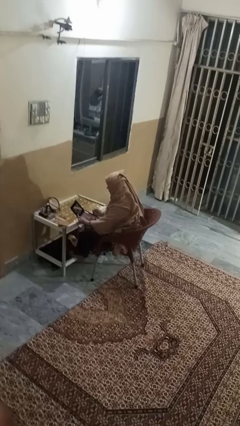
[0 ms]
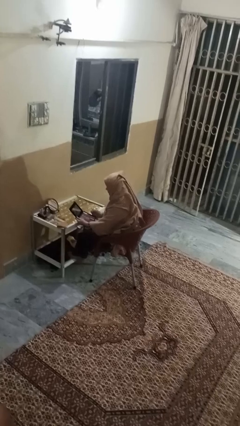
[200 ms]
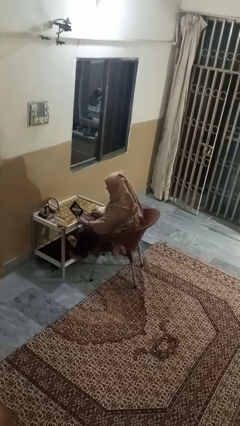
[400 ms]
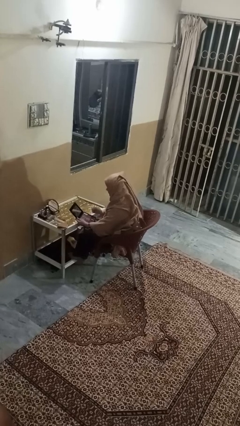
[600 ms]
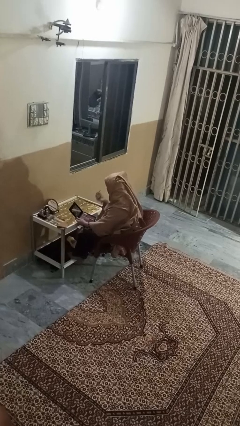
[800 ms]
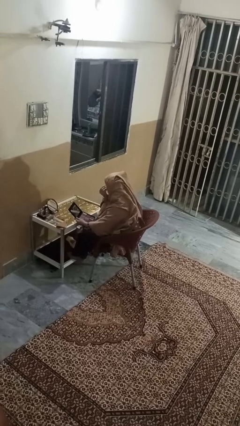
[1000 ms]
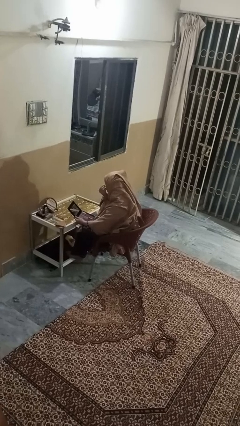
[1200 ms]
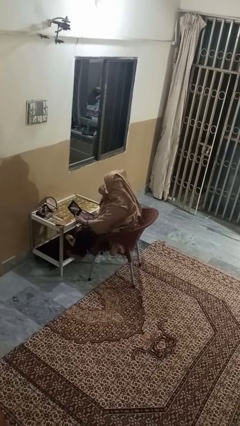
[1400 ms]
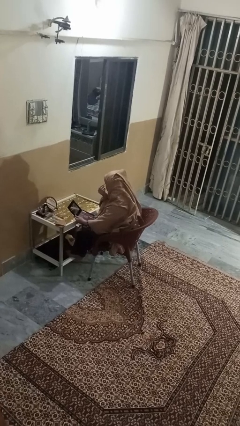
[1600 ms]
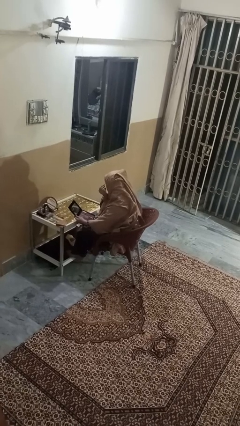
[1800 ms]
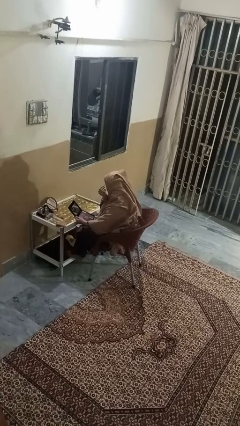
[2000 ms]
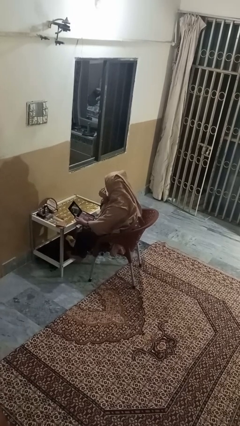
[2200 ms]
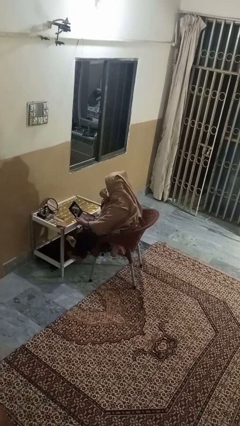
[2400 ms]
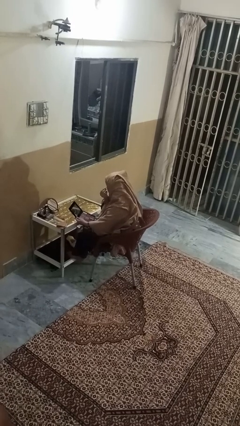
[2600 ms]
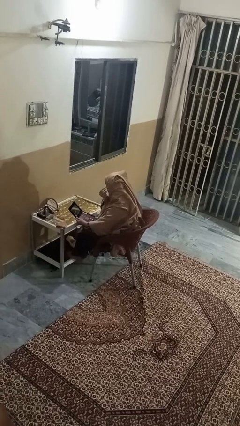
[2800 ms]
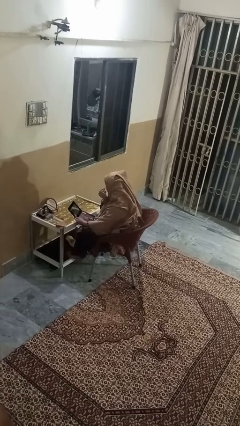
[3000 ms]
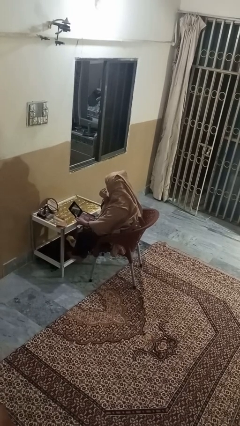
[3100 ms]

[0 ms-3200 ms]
person applies eye makeup

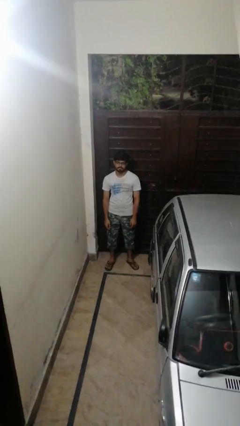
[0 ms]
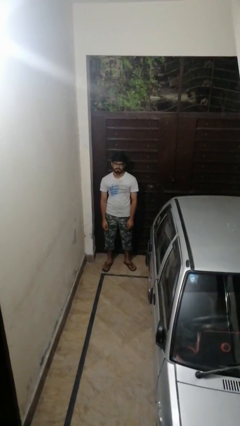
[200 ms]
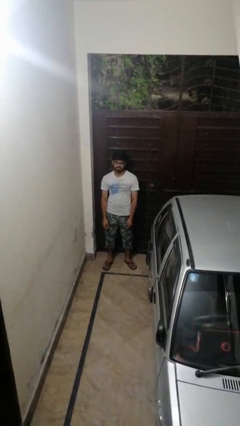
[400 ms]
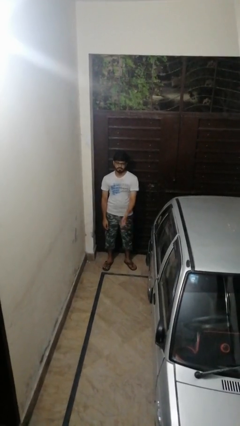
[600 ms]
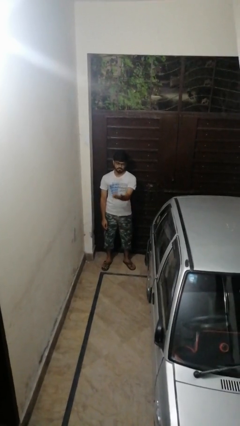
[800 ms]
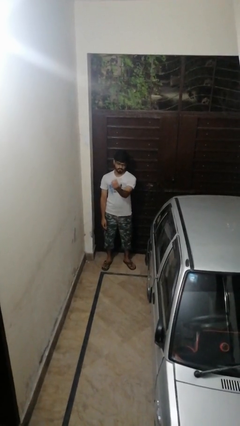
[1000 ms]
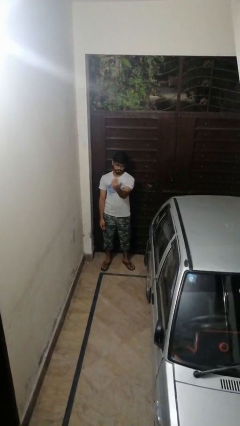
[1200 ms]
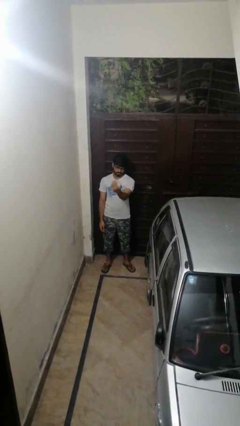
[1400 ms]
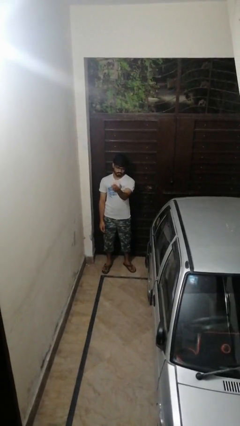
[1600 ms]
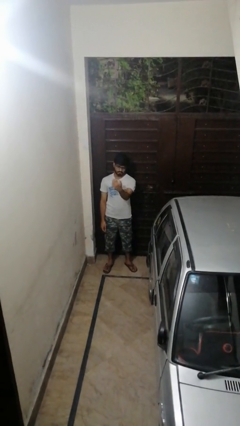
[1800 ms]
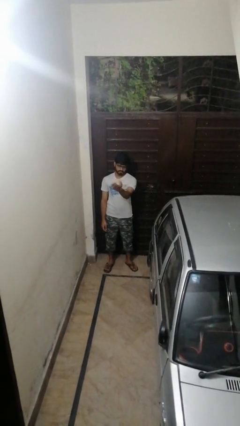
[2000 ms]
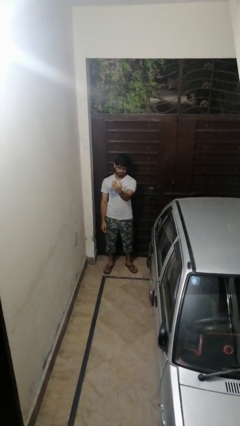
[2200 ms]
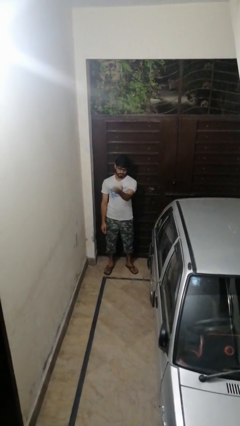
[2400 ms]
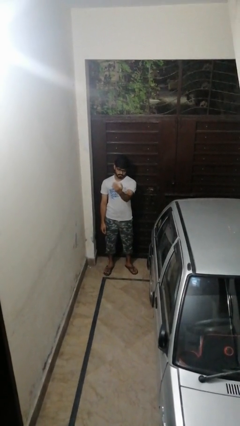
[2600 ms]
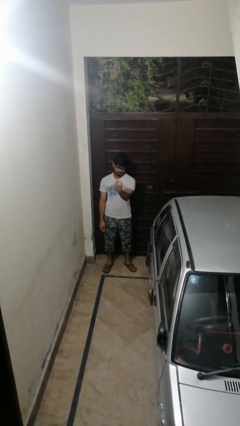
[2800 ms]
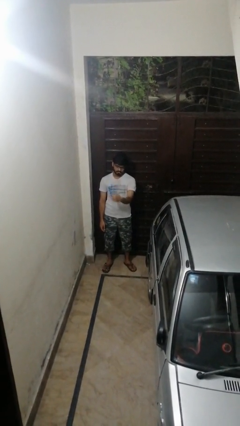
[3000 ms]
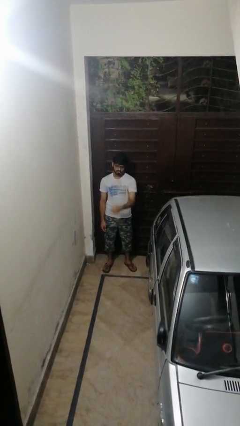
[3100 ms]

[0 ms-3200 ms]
person gestures come here

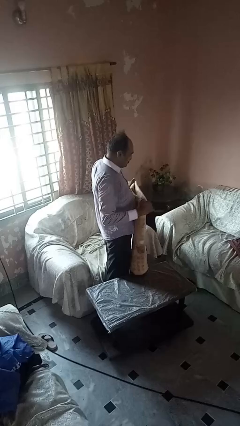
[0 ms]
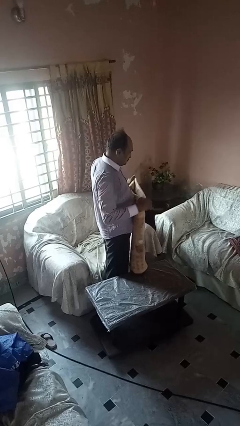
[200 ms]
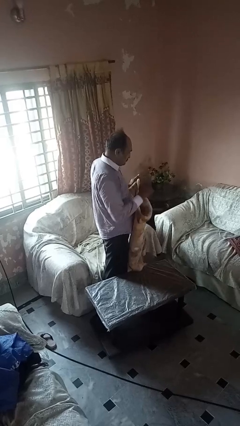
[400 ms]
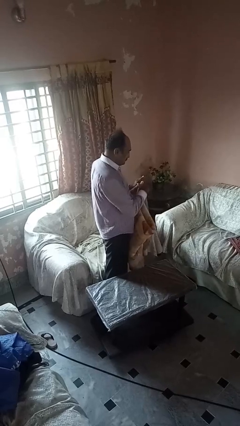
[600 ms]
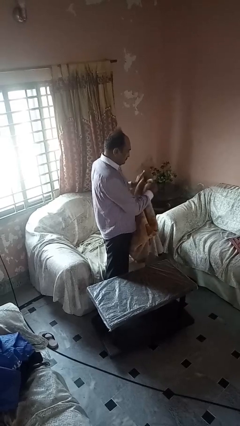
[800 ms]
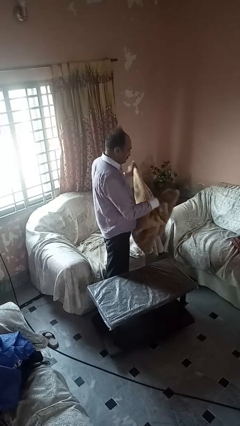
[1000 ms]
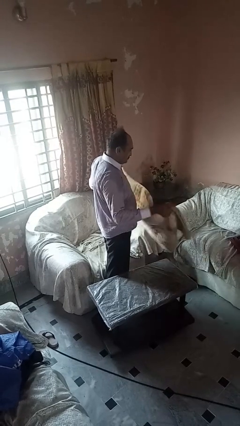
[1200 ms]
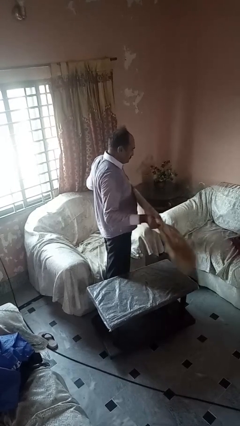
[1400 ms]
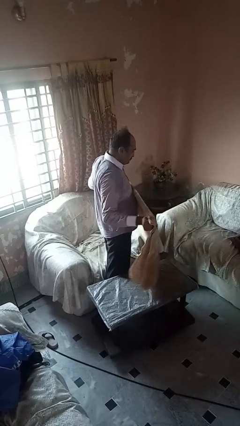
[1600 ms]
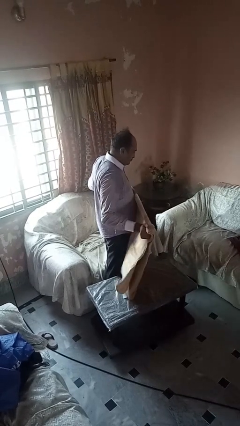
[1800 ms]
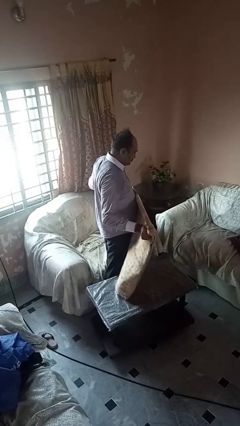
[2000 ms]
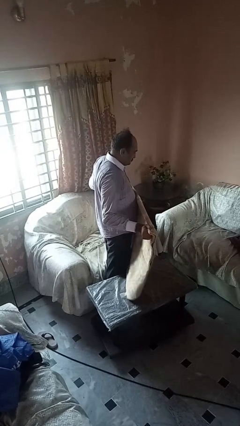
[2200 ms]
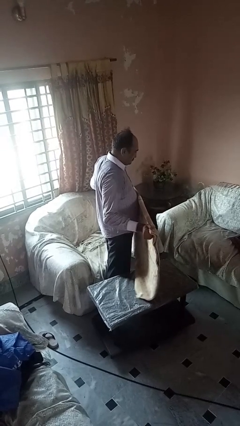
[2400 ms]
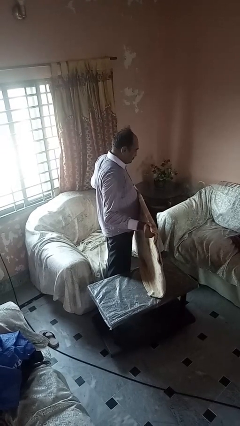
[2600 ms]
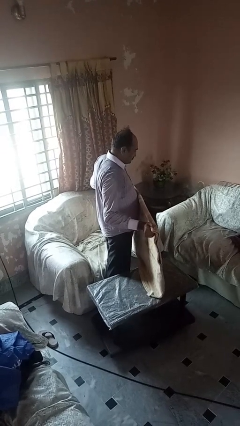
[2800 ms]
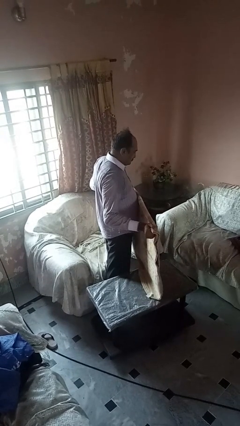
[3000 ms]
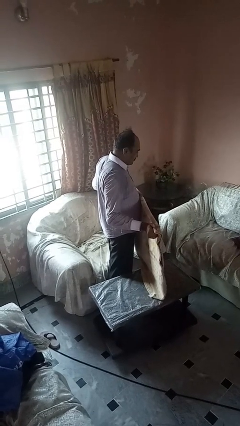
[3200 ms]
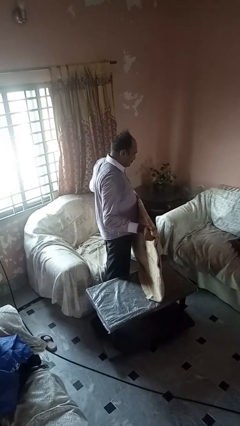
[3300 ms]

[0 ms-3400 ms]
person unfolds blanket

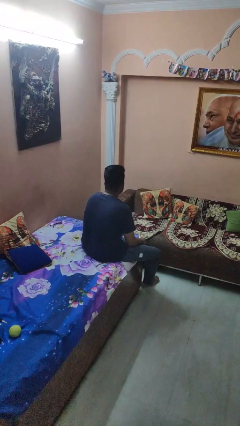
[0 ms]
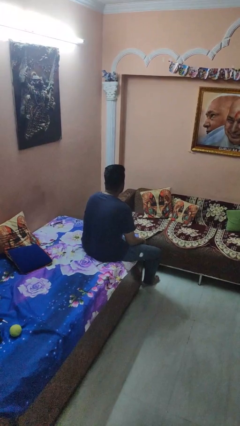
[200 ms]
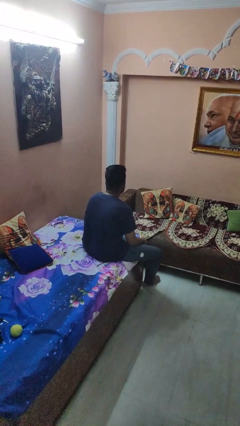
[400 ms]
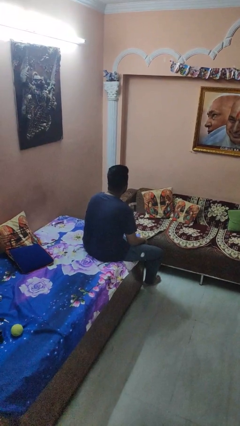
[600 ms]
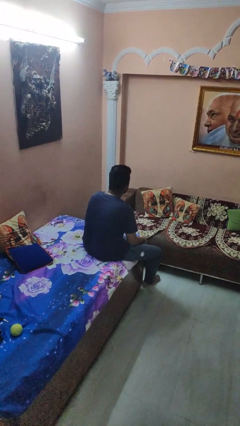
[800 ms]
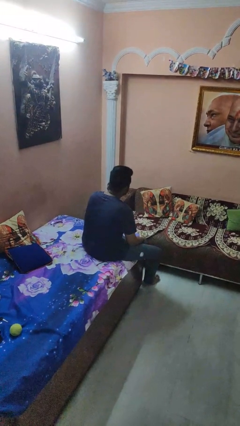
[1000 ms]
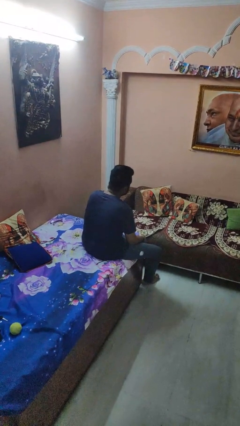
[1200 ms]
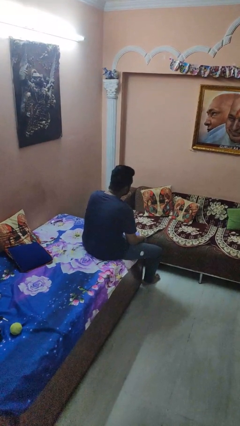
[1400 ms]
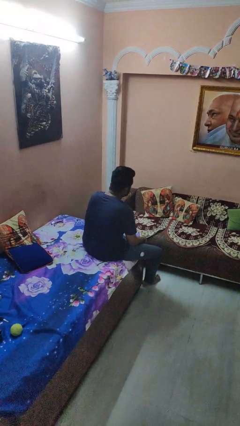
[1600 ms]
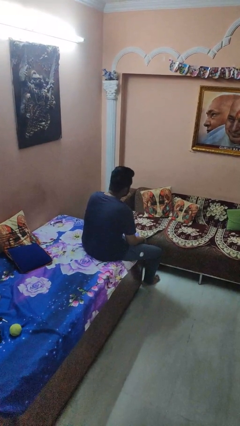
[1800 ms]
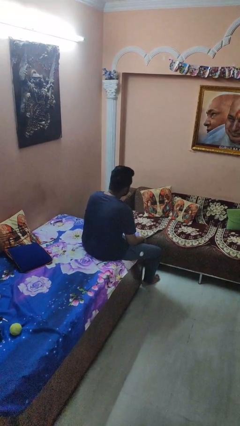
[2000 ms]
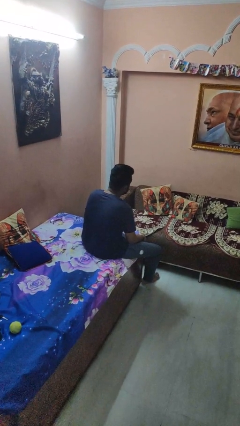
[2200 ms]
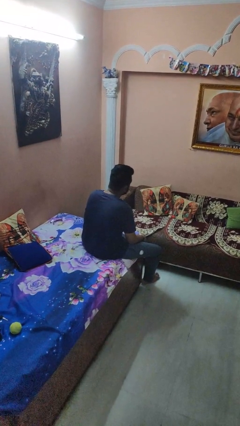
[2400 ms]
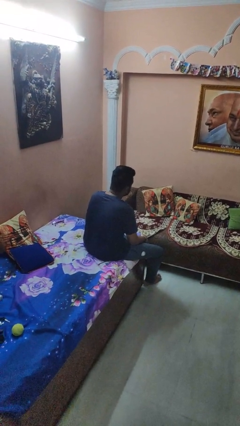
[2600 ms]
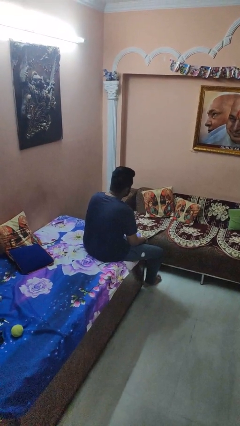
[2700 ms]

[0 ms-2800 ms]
person gestures listen closely

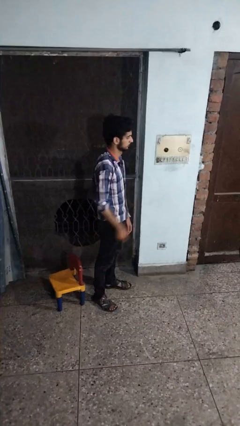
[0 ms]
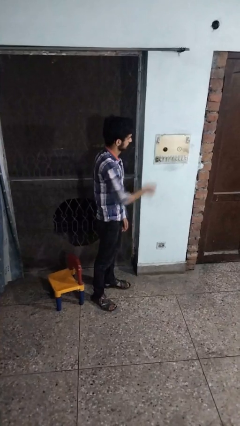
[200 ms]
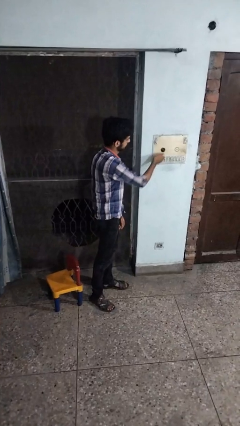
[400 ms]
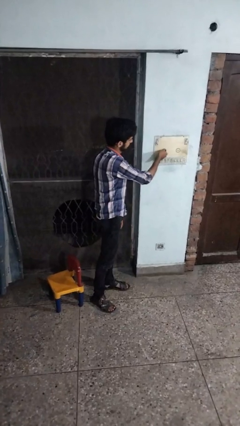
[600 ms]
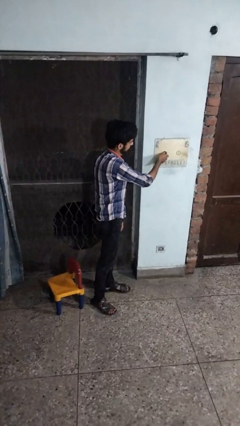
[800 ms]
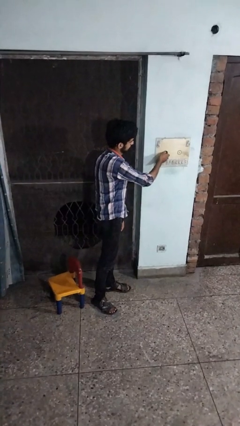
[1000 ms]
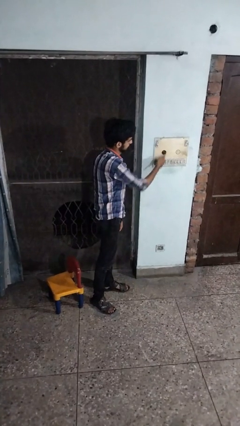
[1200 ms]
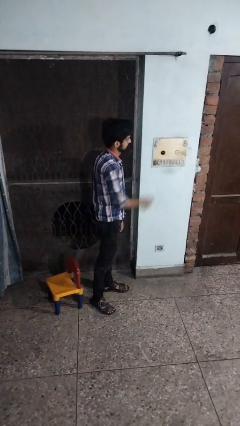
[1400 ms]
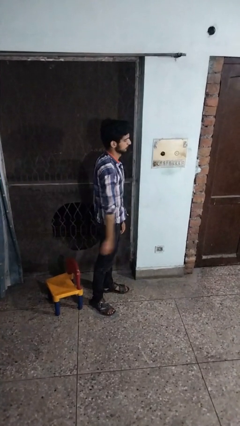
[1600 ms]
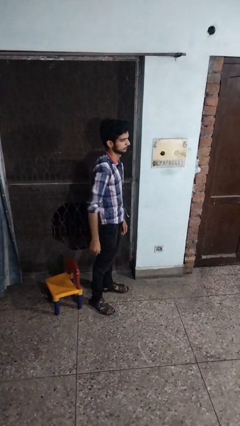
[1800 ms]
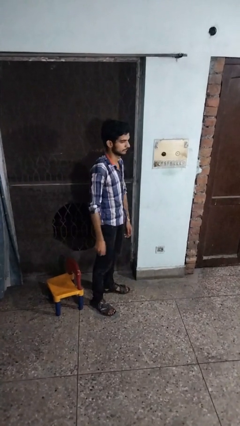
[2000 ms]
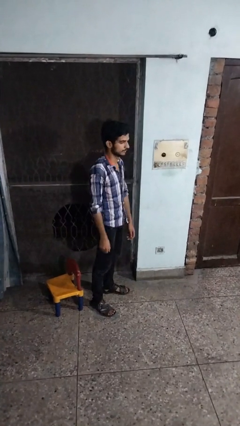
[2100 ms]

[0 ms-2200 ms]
person adjusts thermostat

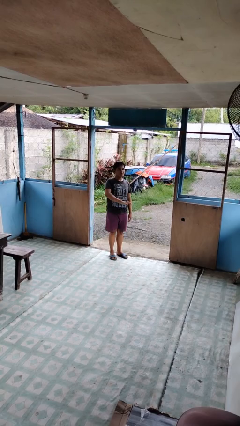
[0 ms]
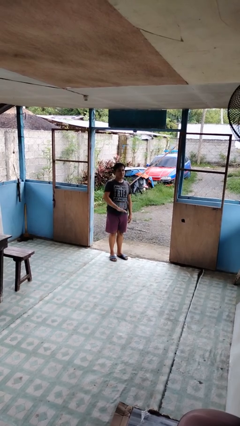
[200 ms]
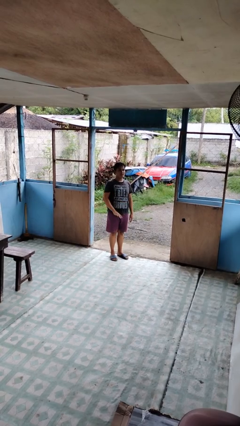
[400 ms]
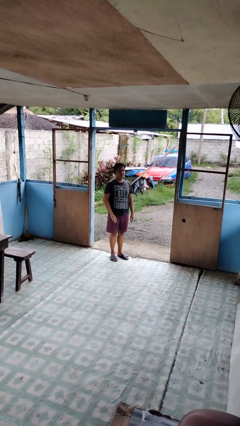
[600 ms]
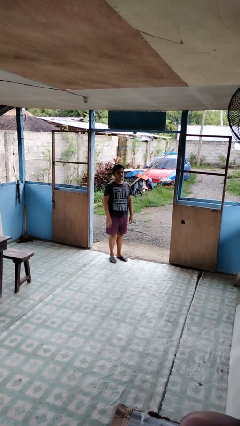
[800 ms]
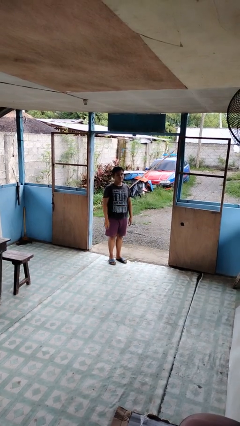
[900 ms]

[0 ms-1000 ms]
person gestures swipe down

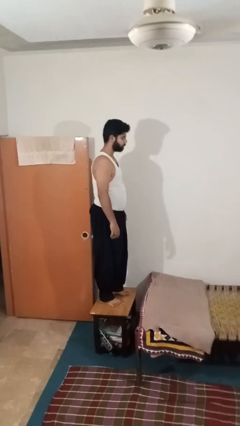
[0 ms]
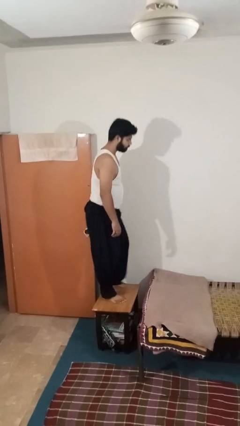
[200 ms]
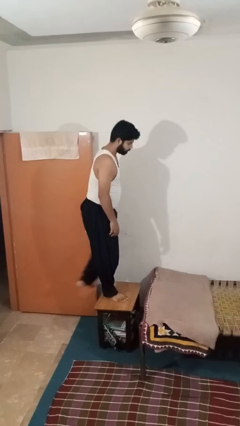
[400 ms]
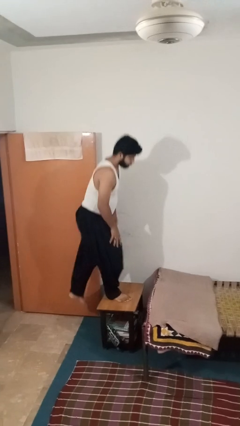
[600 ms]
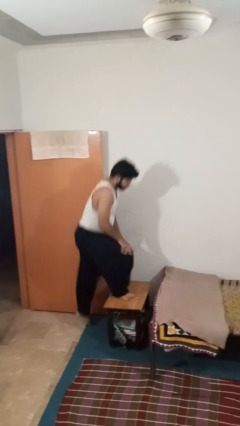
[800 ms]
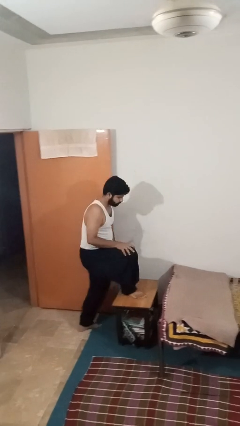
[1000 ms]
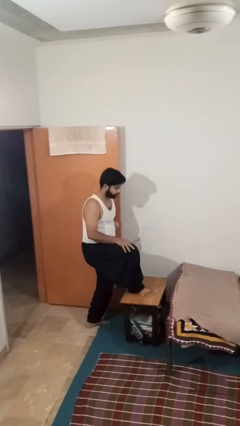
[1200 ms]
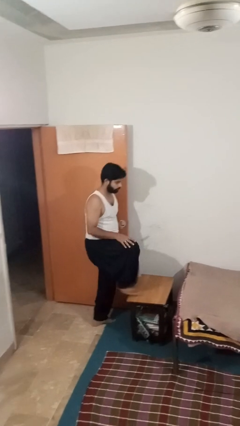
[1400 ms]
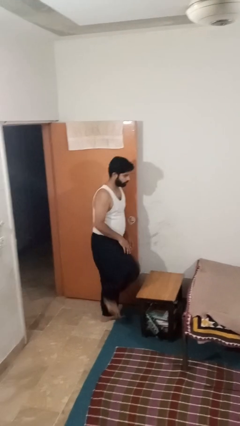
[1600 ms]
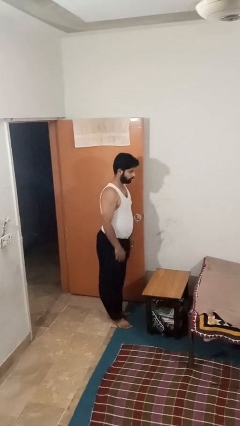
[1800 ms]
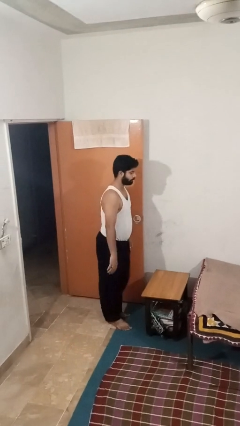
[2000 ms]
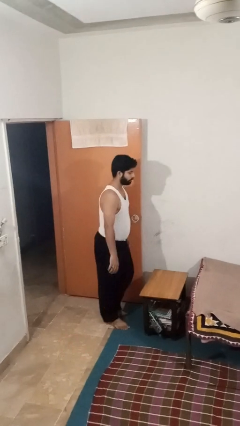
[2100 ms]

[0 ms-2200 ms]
person climbs off table
